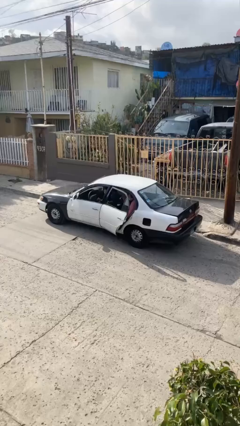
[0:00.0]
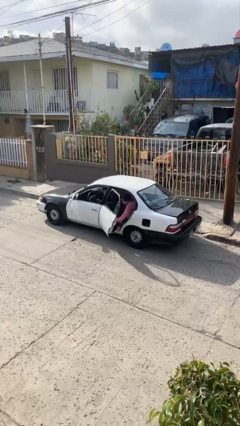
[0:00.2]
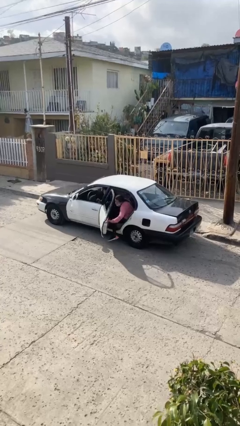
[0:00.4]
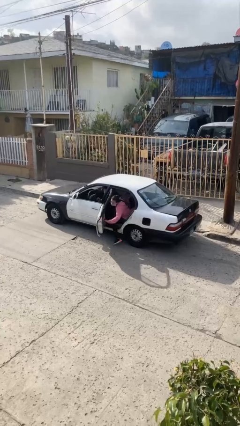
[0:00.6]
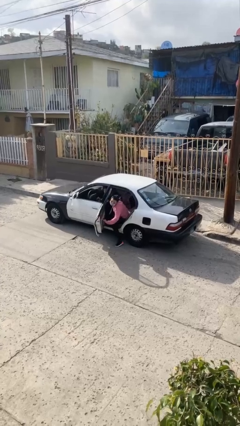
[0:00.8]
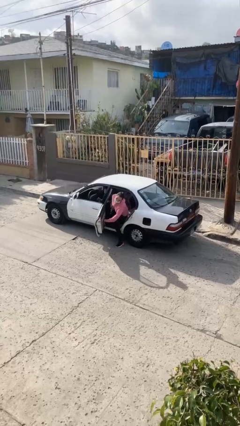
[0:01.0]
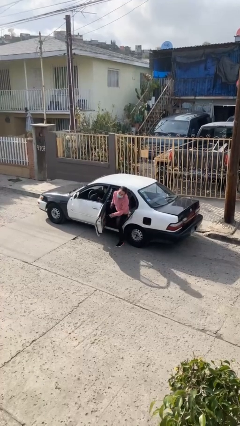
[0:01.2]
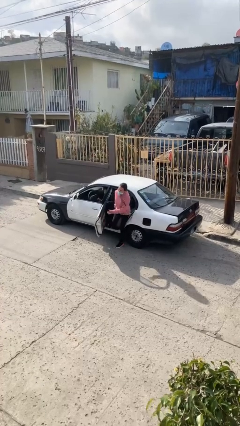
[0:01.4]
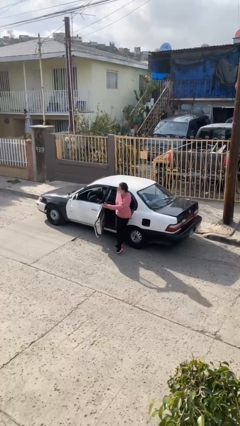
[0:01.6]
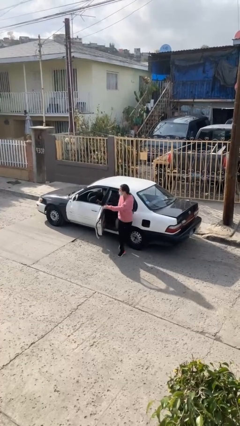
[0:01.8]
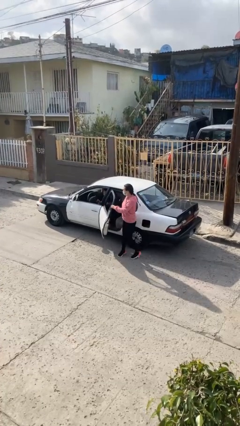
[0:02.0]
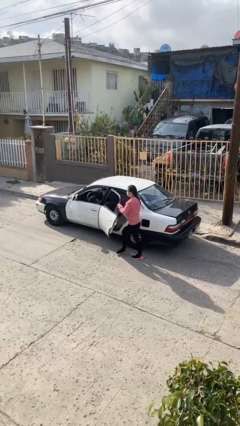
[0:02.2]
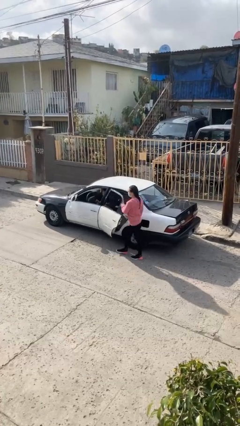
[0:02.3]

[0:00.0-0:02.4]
car drops off person

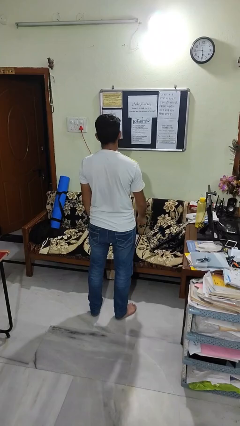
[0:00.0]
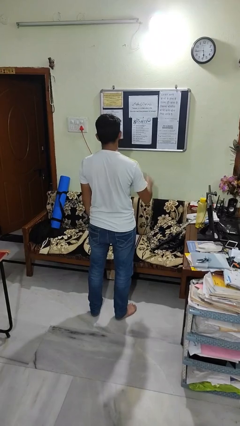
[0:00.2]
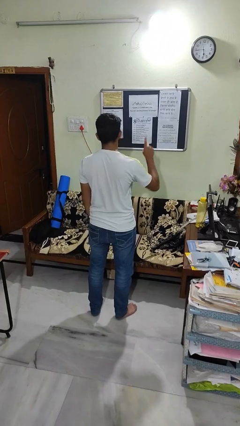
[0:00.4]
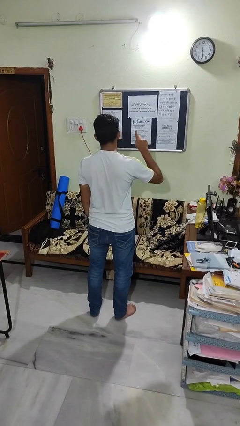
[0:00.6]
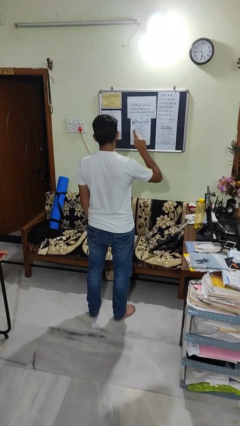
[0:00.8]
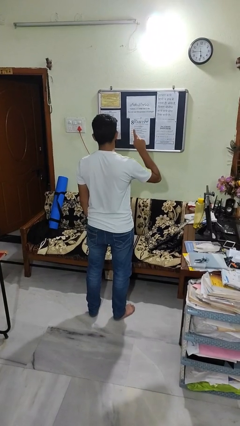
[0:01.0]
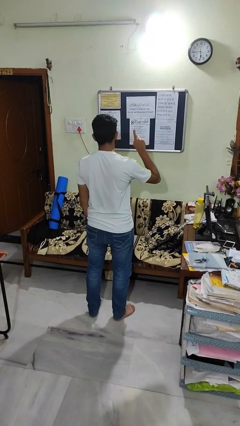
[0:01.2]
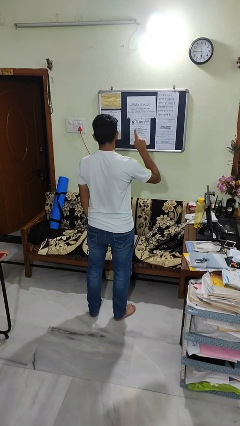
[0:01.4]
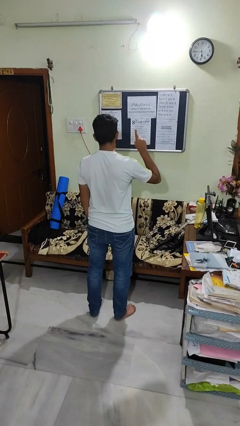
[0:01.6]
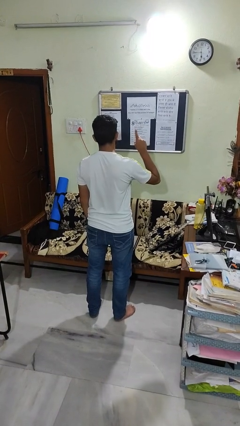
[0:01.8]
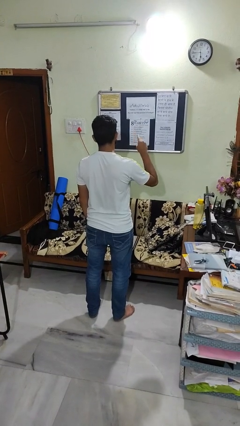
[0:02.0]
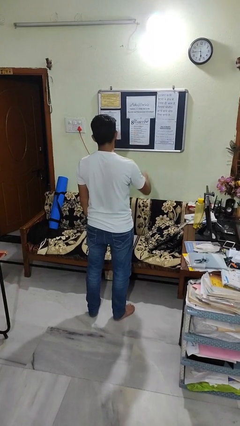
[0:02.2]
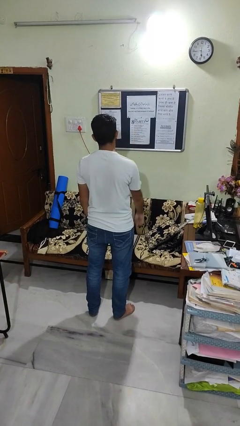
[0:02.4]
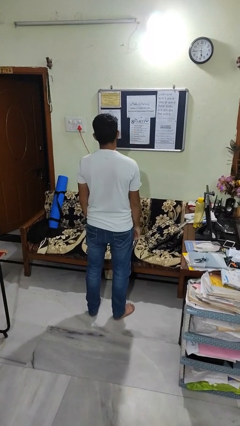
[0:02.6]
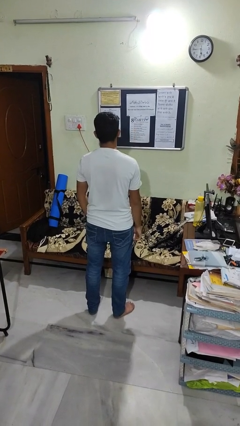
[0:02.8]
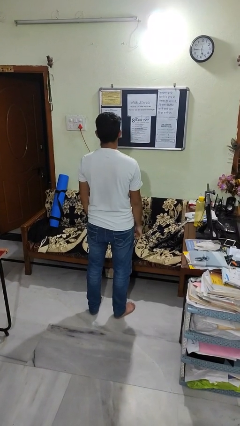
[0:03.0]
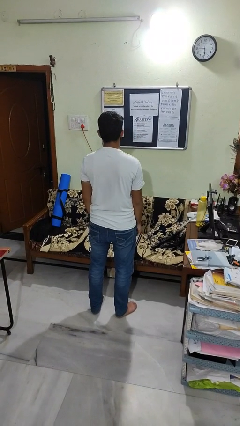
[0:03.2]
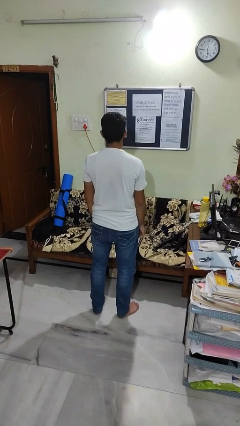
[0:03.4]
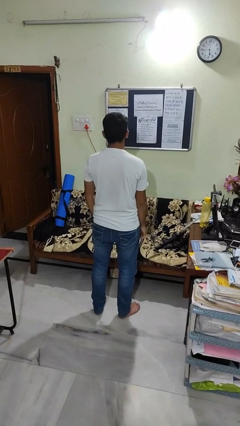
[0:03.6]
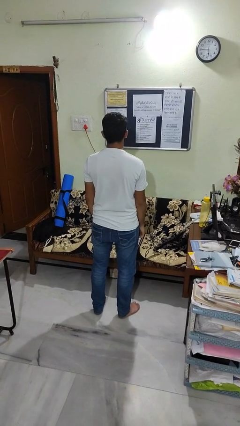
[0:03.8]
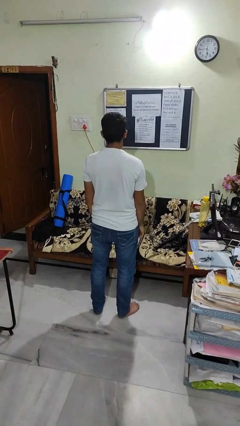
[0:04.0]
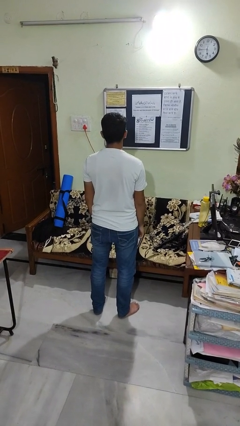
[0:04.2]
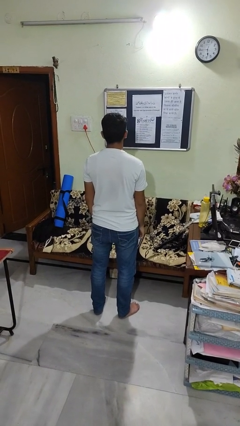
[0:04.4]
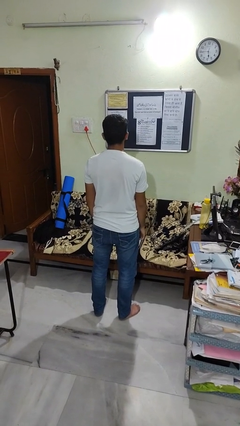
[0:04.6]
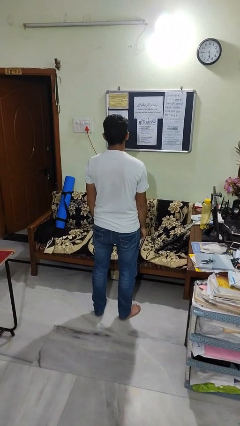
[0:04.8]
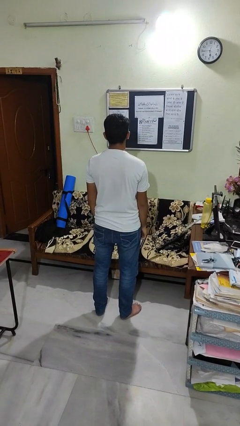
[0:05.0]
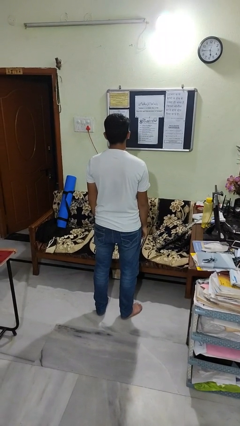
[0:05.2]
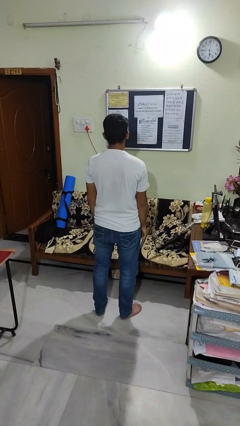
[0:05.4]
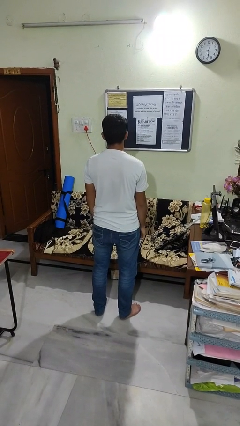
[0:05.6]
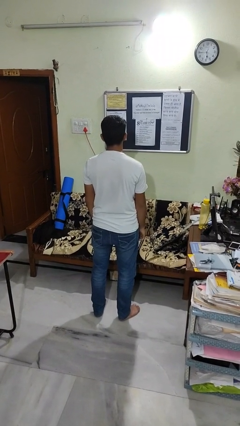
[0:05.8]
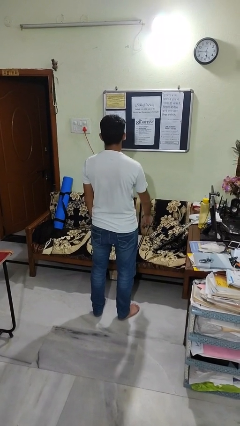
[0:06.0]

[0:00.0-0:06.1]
person gestures number one

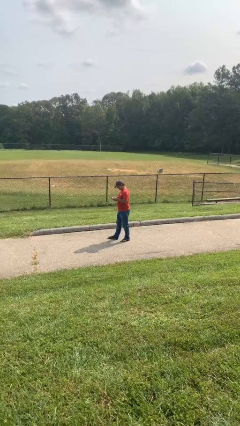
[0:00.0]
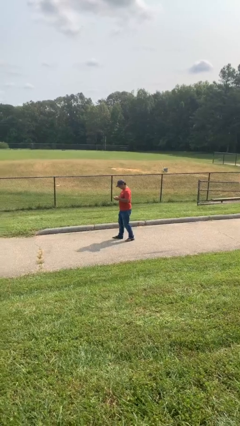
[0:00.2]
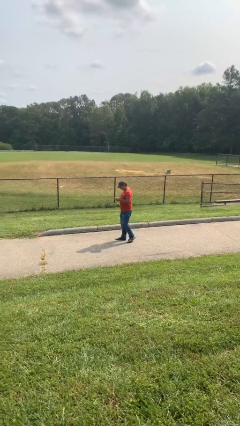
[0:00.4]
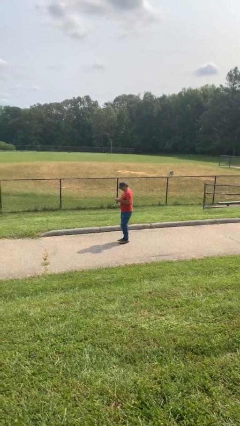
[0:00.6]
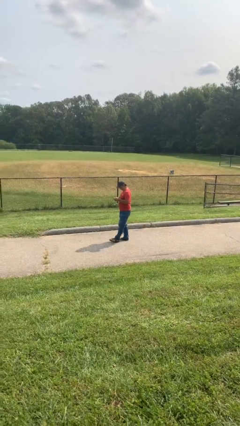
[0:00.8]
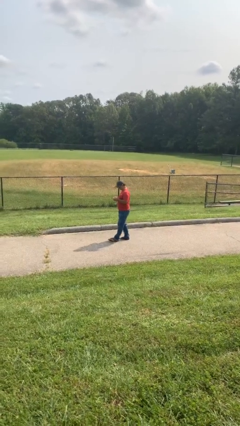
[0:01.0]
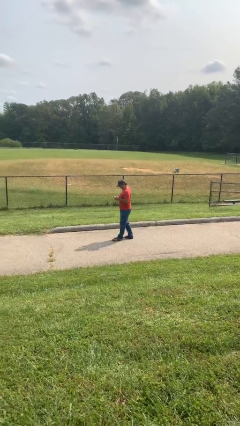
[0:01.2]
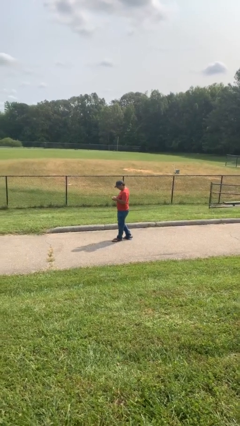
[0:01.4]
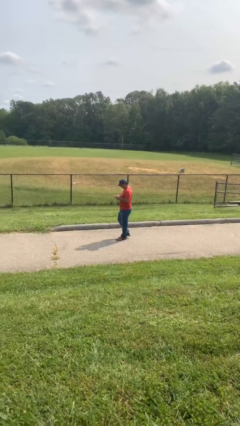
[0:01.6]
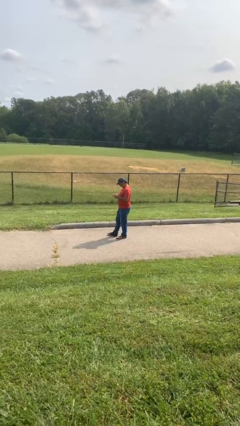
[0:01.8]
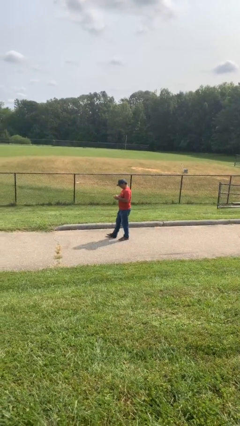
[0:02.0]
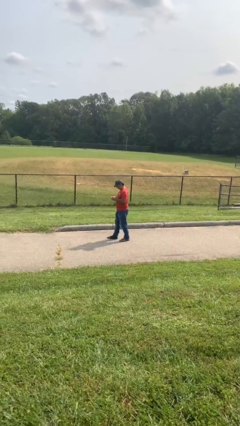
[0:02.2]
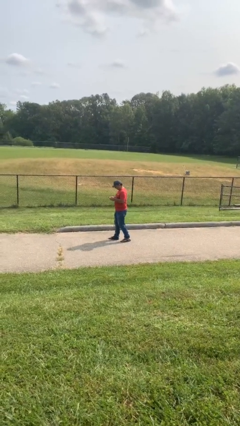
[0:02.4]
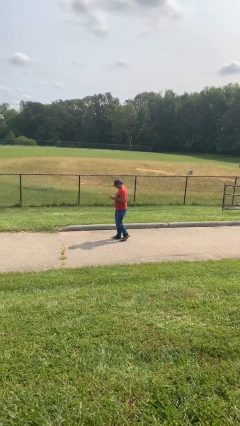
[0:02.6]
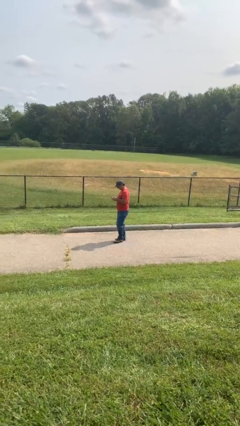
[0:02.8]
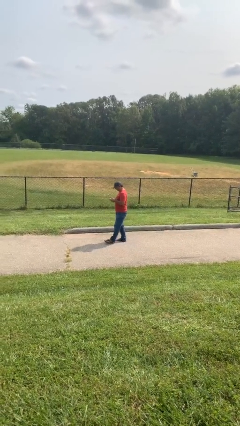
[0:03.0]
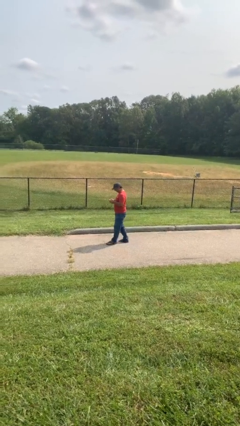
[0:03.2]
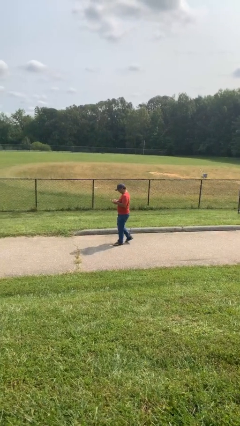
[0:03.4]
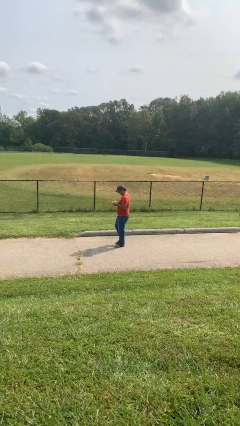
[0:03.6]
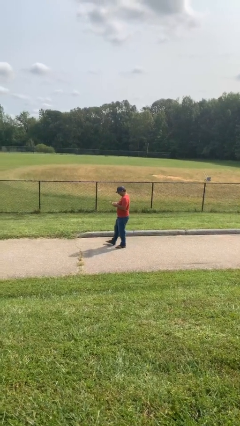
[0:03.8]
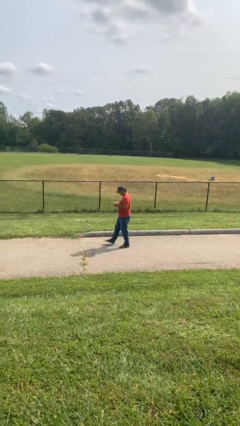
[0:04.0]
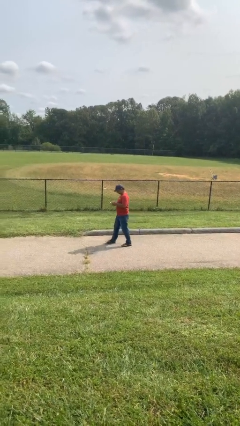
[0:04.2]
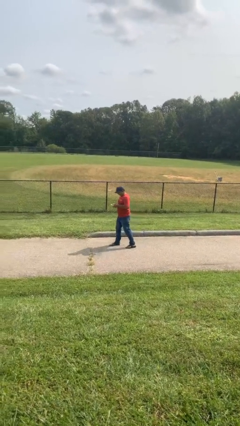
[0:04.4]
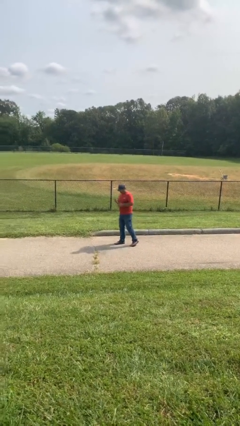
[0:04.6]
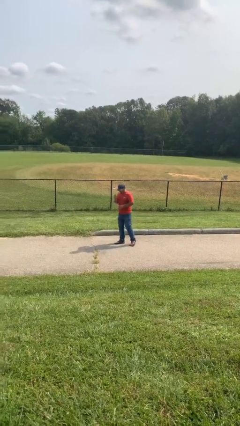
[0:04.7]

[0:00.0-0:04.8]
person texts on phone

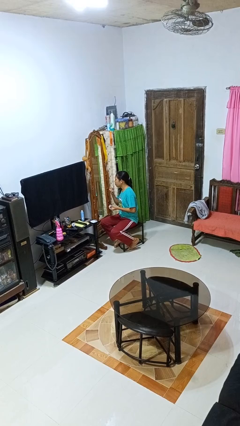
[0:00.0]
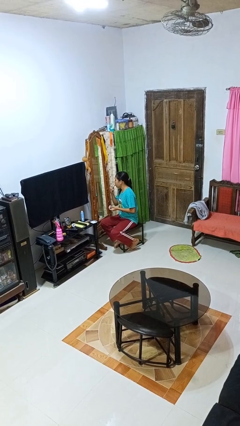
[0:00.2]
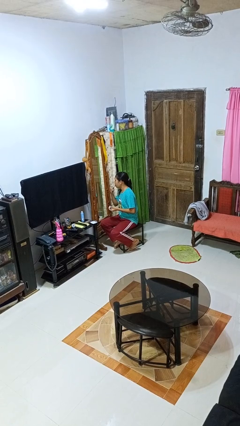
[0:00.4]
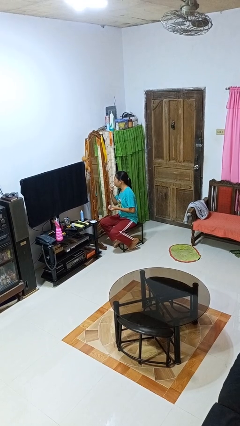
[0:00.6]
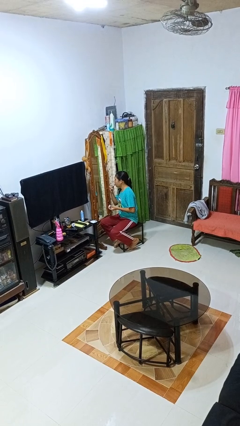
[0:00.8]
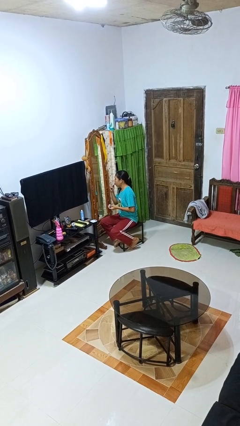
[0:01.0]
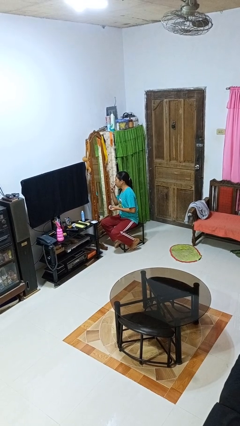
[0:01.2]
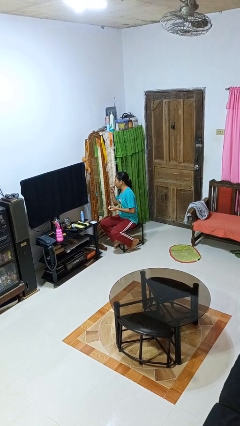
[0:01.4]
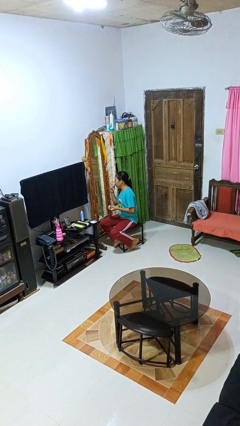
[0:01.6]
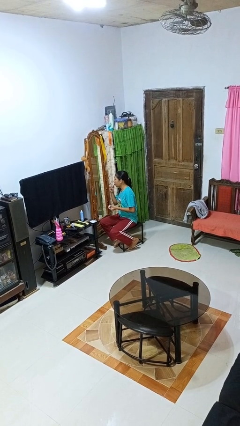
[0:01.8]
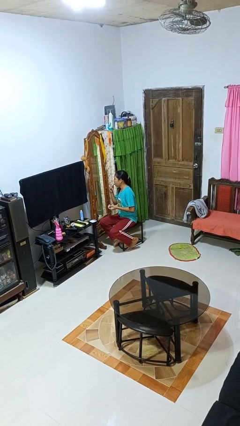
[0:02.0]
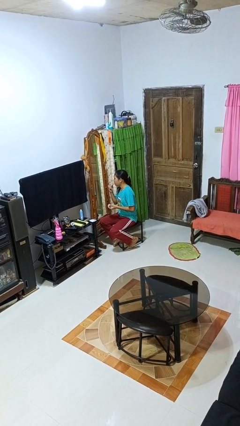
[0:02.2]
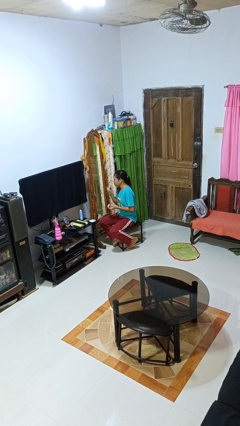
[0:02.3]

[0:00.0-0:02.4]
person applies lip makeup

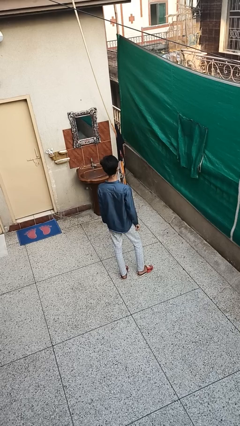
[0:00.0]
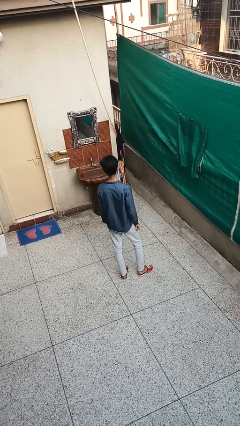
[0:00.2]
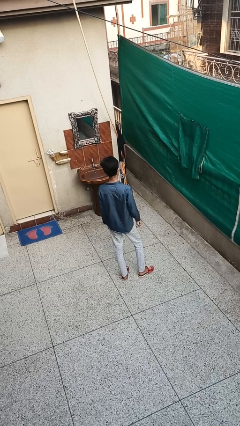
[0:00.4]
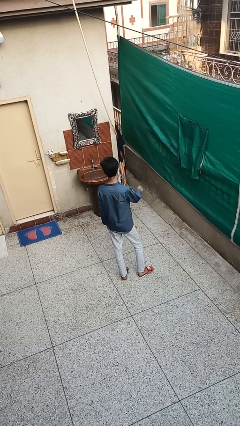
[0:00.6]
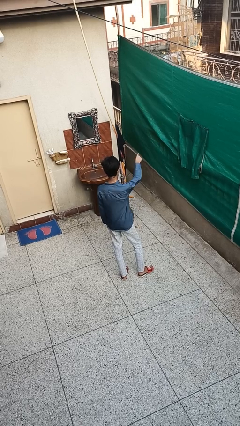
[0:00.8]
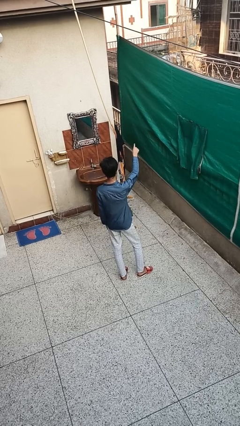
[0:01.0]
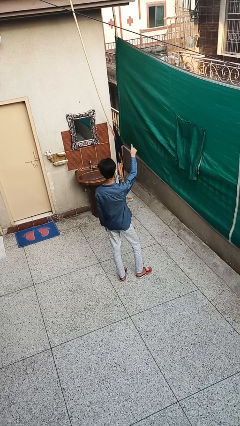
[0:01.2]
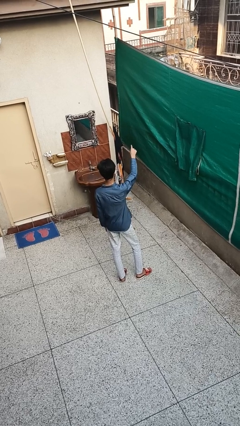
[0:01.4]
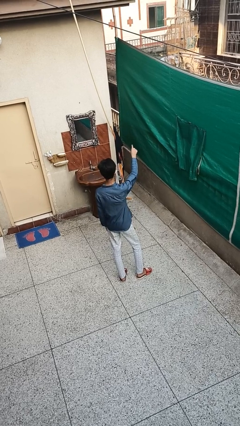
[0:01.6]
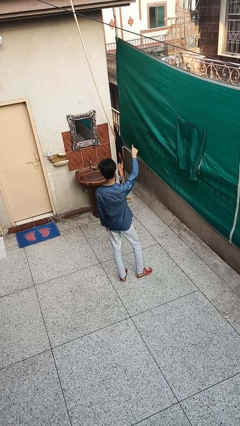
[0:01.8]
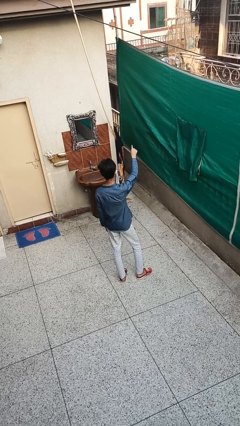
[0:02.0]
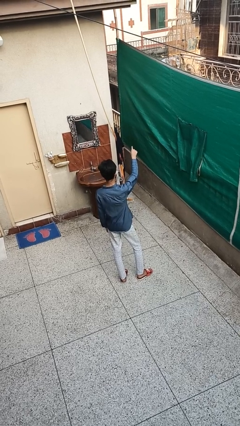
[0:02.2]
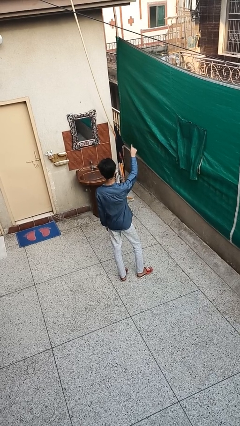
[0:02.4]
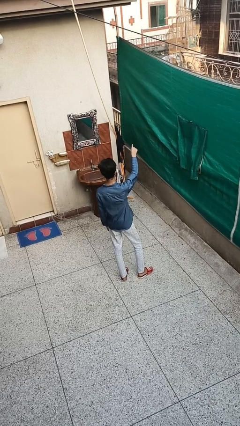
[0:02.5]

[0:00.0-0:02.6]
person points at person
